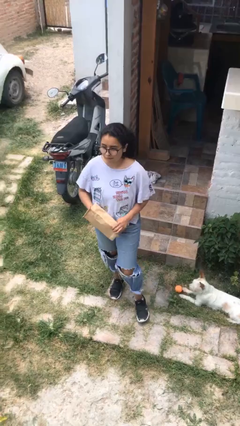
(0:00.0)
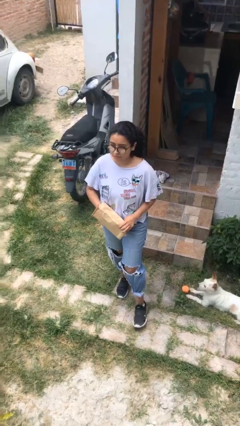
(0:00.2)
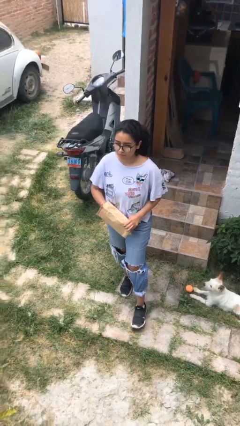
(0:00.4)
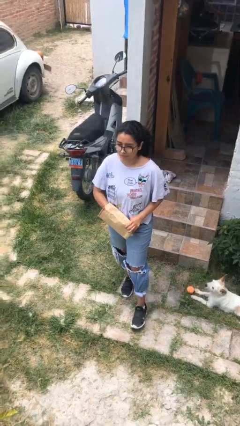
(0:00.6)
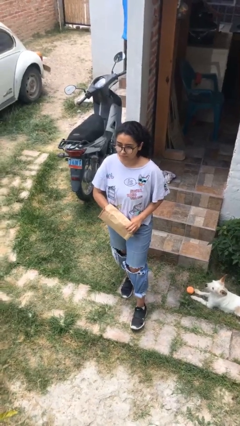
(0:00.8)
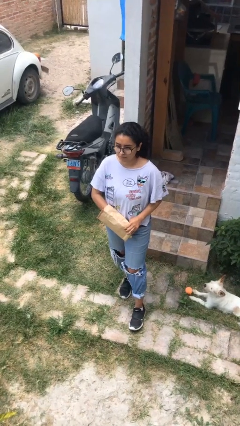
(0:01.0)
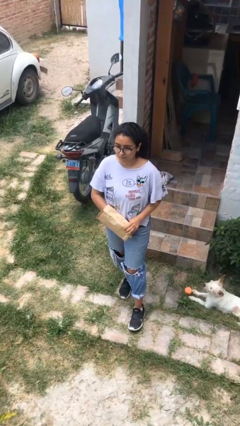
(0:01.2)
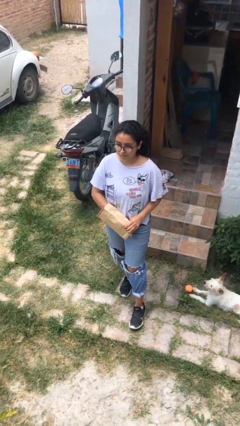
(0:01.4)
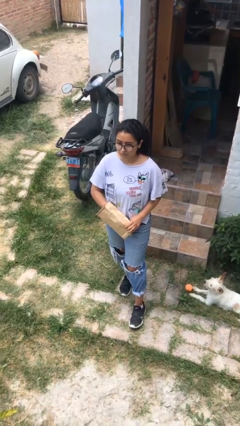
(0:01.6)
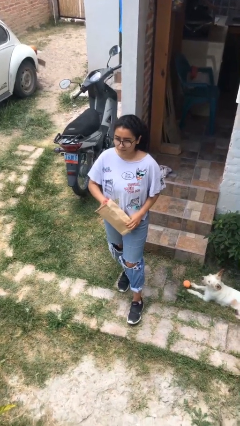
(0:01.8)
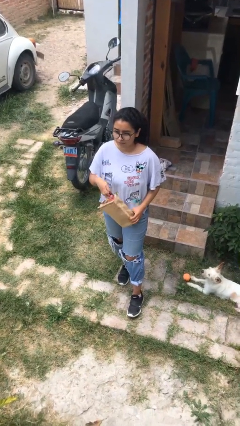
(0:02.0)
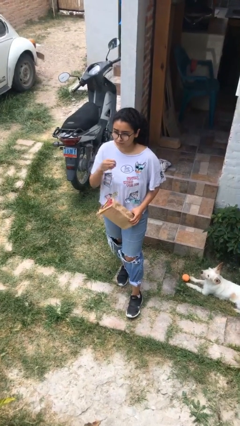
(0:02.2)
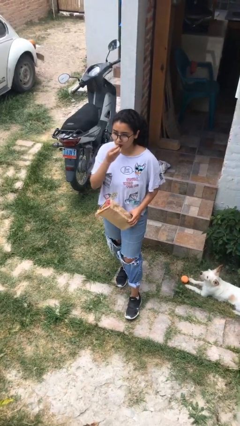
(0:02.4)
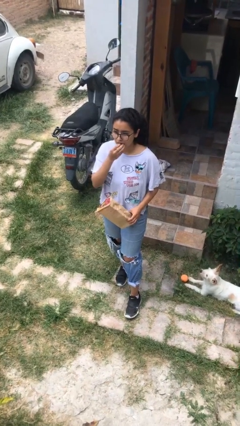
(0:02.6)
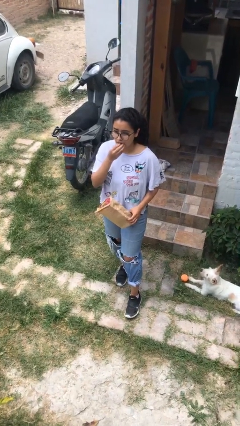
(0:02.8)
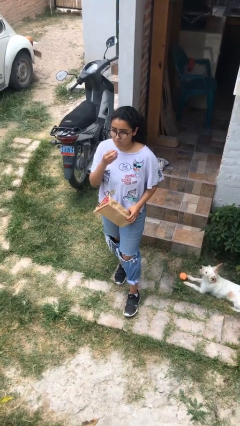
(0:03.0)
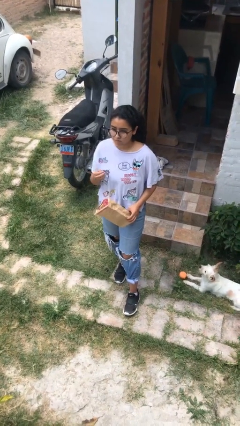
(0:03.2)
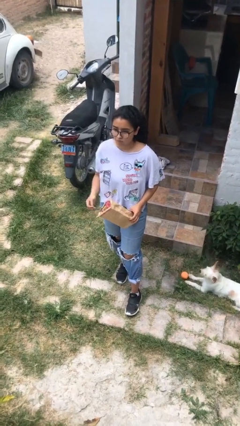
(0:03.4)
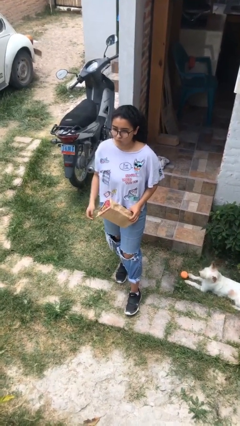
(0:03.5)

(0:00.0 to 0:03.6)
person eats snack from bag

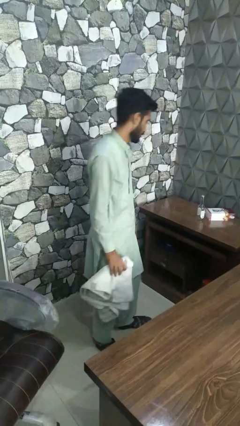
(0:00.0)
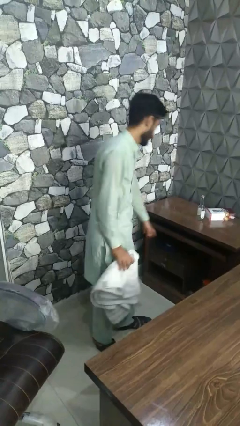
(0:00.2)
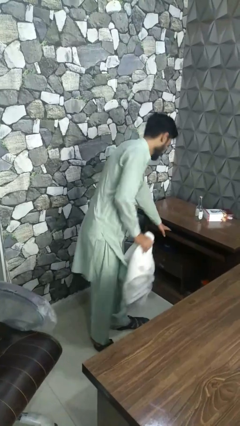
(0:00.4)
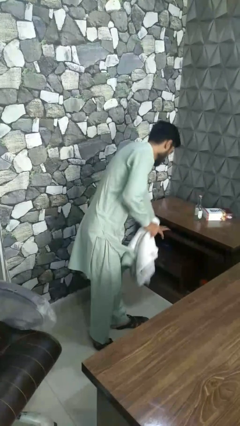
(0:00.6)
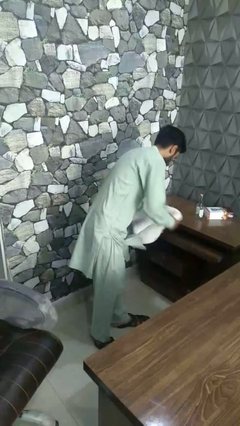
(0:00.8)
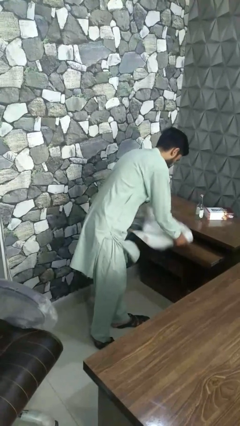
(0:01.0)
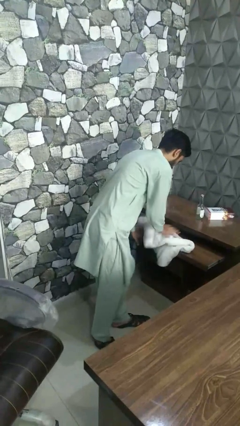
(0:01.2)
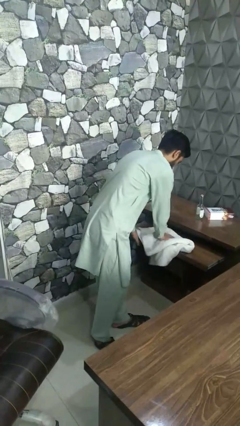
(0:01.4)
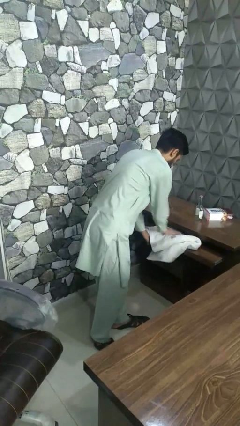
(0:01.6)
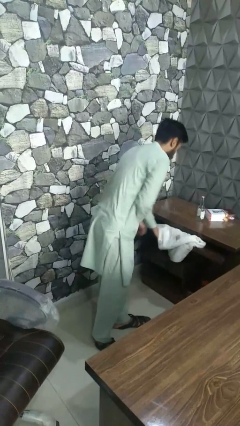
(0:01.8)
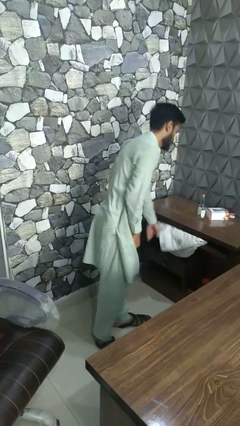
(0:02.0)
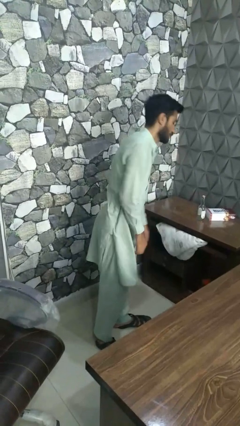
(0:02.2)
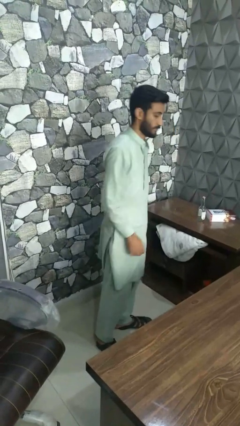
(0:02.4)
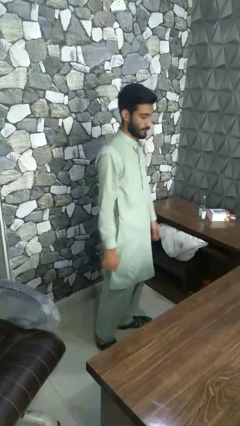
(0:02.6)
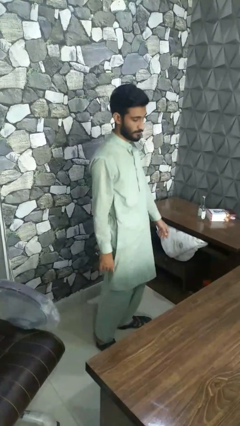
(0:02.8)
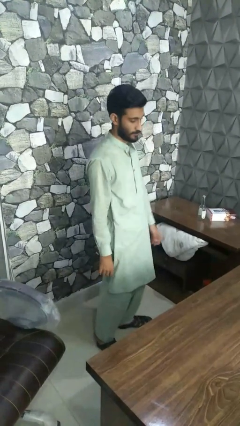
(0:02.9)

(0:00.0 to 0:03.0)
person puts clothes into dresser

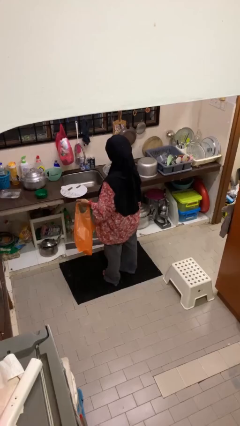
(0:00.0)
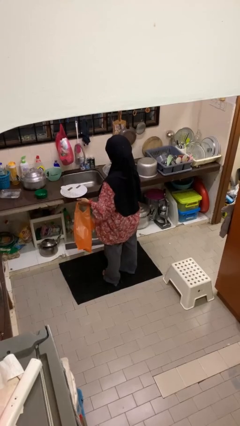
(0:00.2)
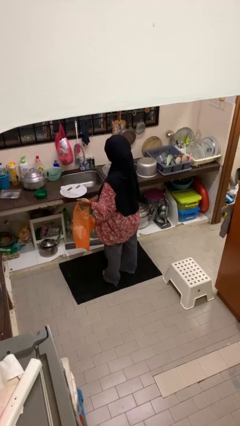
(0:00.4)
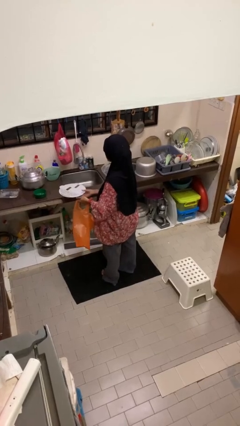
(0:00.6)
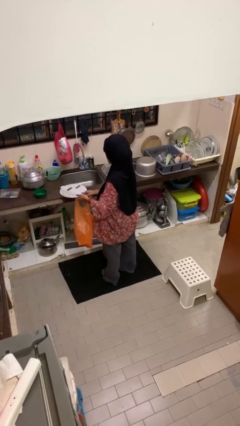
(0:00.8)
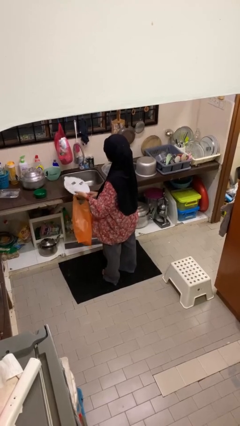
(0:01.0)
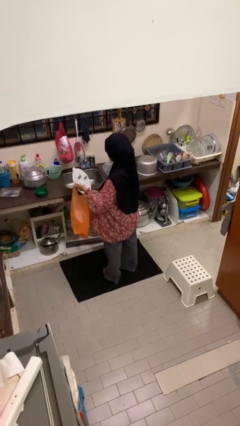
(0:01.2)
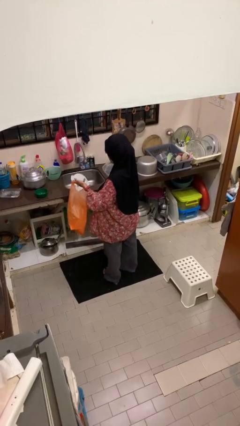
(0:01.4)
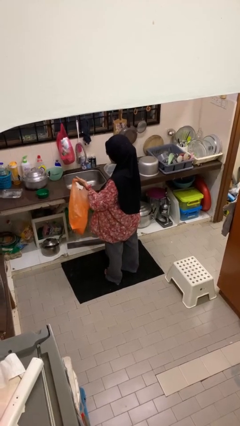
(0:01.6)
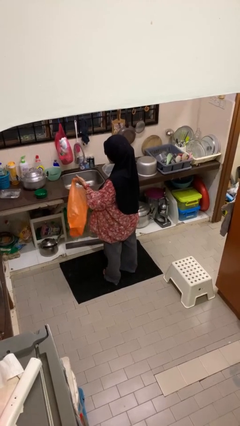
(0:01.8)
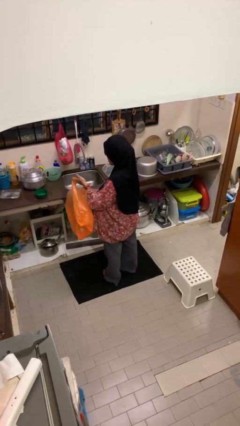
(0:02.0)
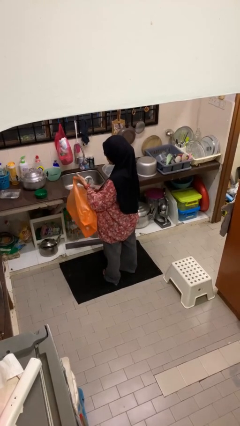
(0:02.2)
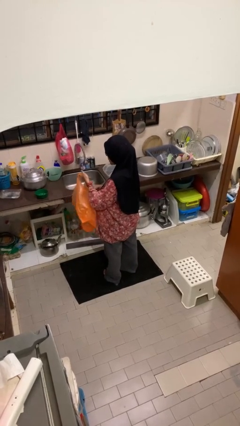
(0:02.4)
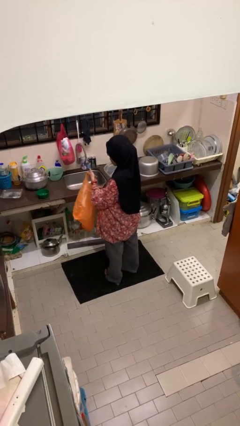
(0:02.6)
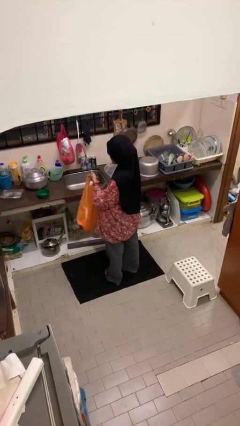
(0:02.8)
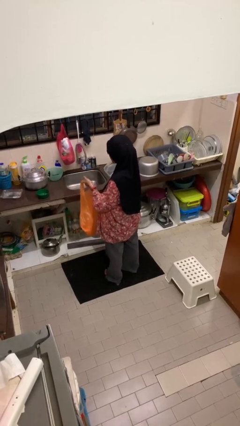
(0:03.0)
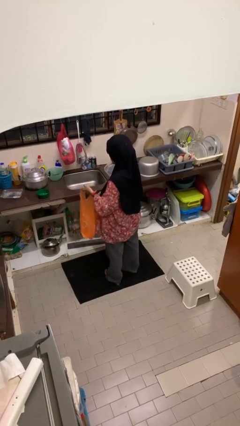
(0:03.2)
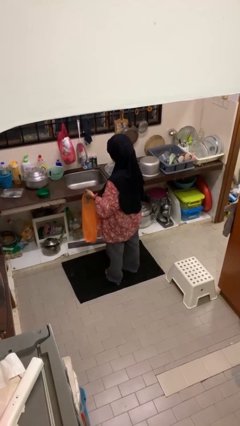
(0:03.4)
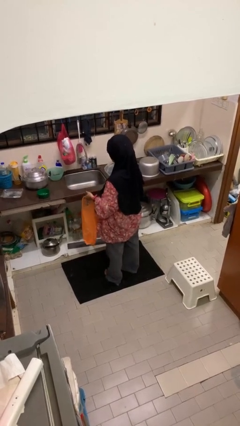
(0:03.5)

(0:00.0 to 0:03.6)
person puts object into bag

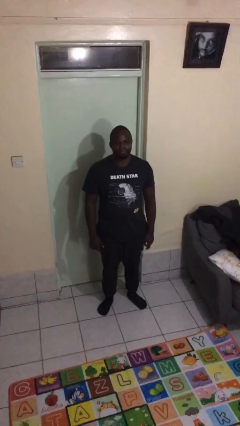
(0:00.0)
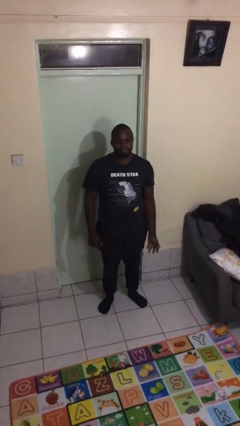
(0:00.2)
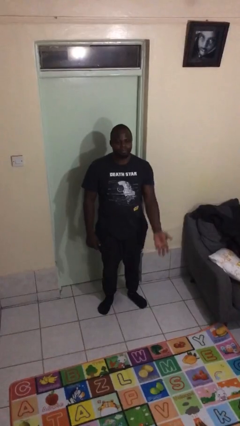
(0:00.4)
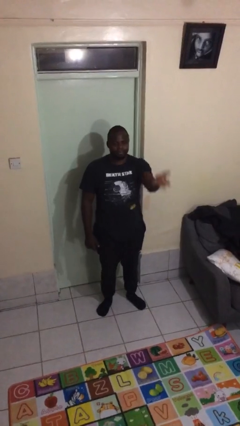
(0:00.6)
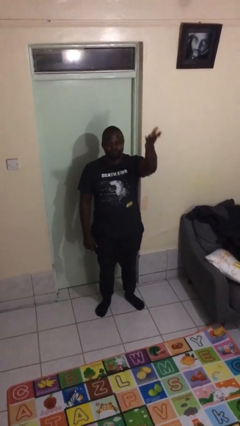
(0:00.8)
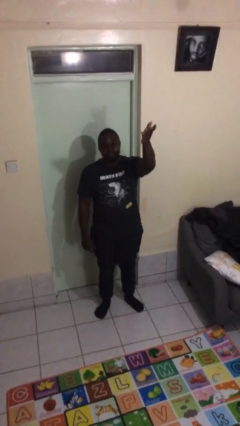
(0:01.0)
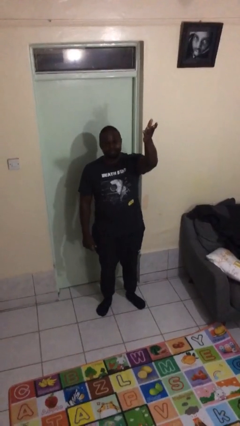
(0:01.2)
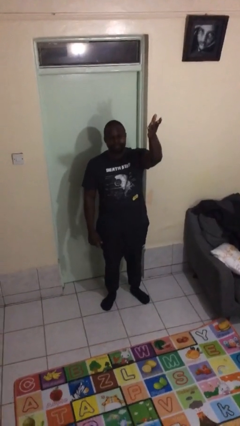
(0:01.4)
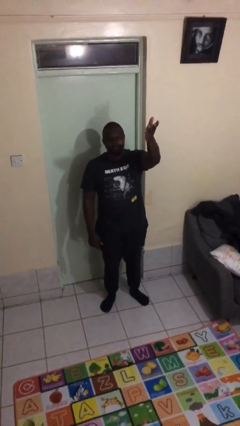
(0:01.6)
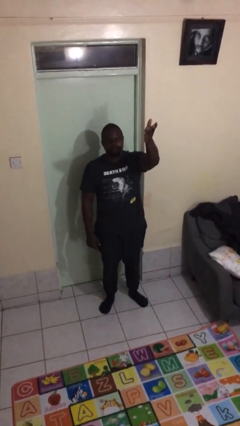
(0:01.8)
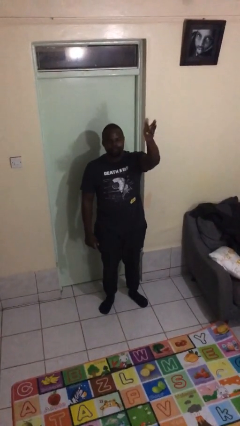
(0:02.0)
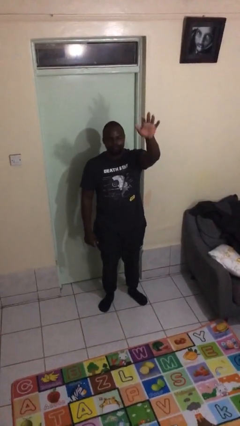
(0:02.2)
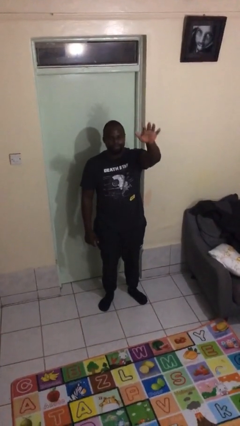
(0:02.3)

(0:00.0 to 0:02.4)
person gestures swipe up

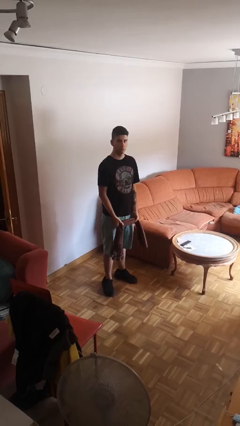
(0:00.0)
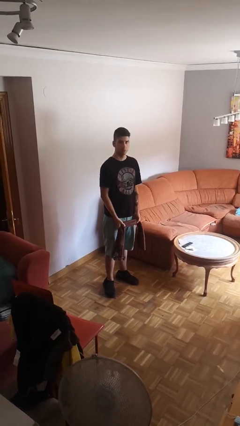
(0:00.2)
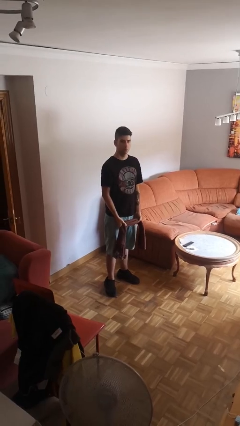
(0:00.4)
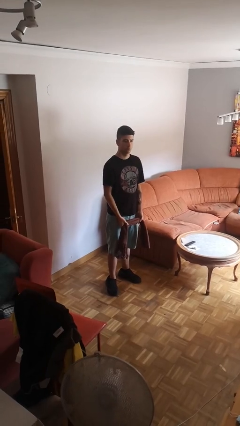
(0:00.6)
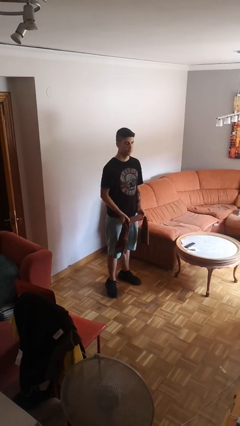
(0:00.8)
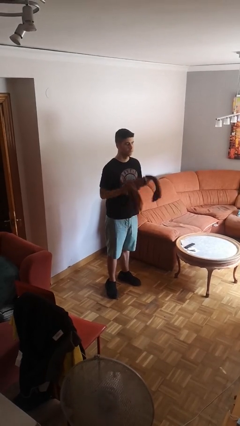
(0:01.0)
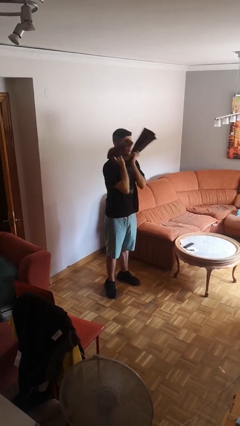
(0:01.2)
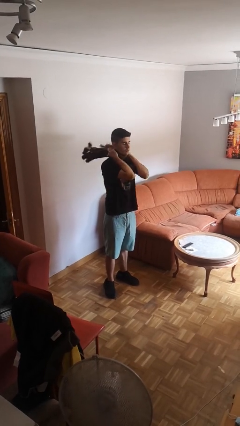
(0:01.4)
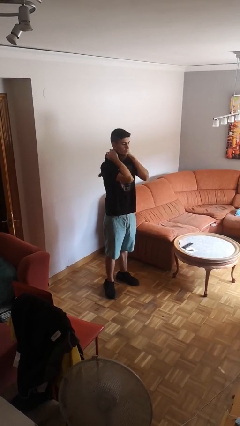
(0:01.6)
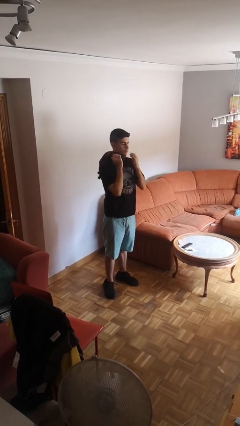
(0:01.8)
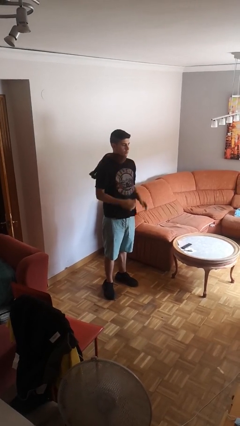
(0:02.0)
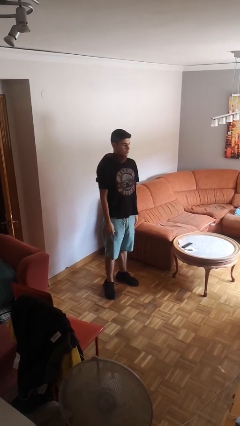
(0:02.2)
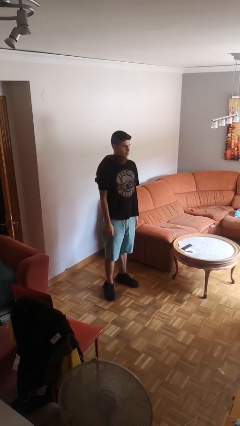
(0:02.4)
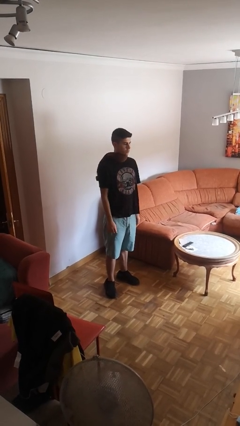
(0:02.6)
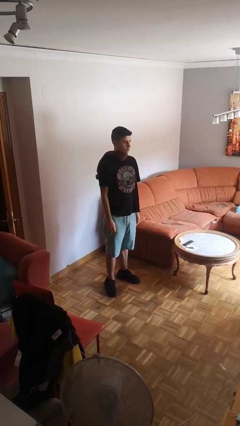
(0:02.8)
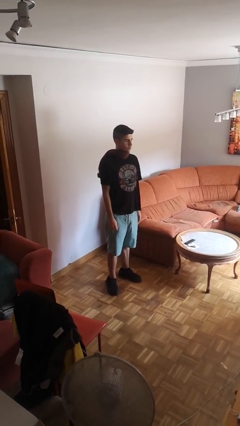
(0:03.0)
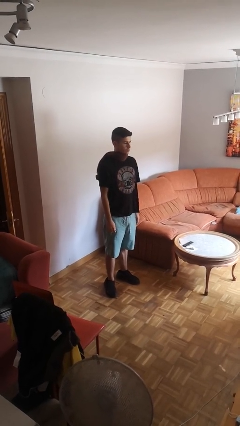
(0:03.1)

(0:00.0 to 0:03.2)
person puts on scarf

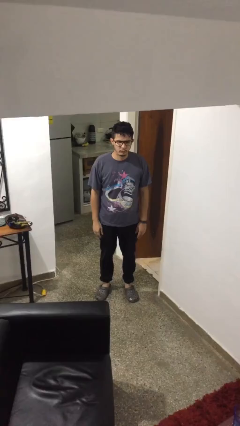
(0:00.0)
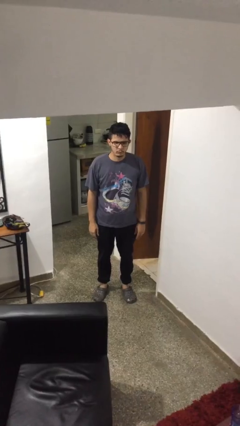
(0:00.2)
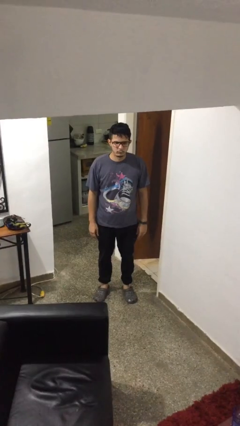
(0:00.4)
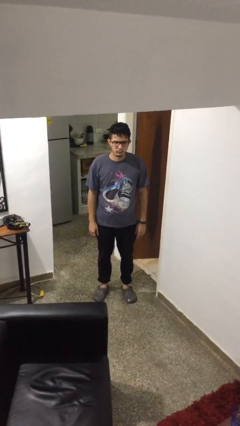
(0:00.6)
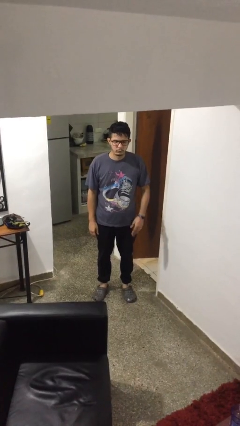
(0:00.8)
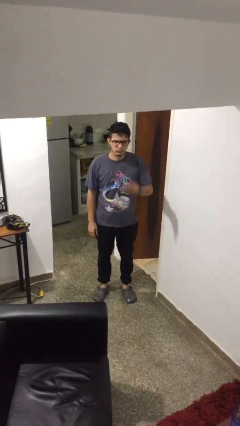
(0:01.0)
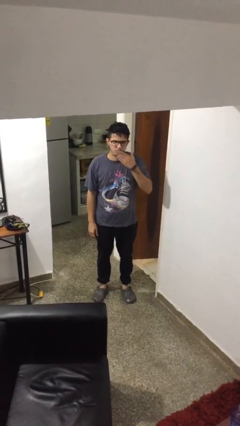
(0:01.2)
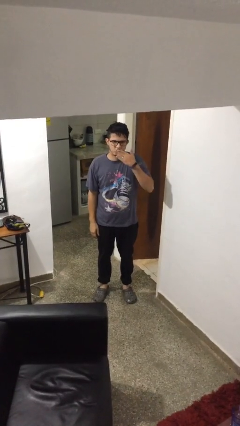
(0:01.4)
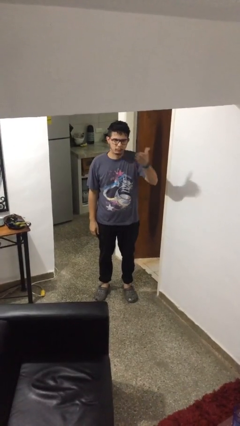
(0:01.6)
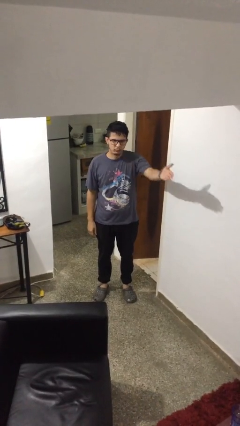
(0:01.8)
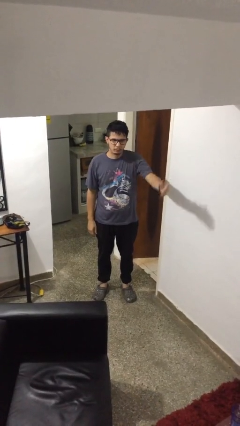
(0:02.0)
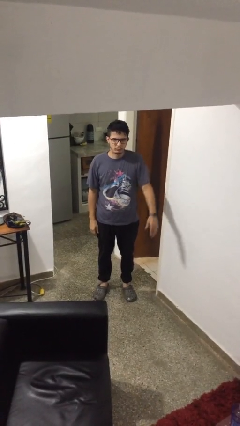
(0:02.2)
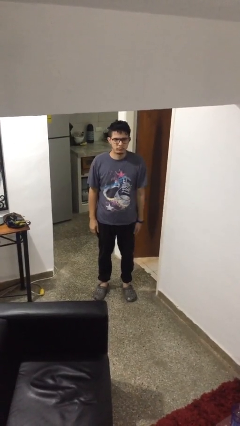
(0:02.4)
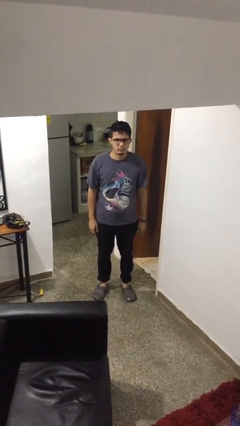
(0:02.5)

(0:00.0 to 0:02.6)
person gestures blow kiss
